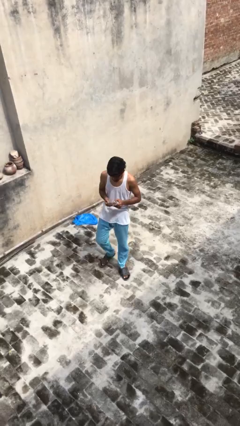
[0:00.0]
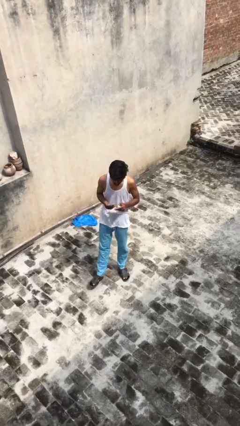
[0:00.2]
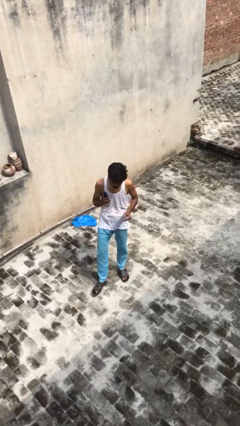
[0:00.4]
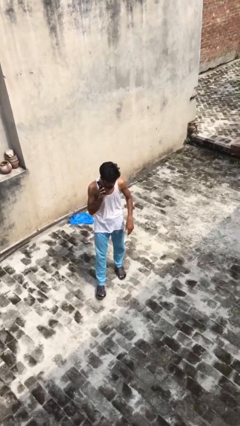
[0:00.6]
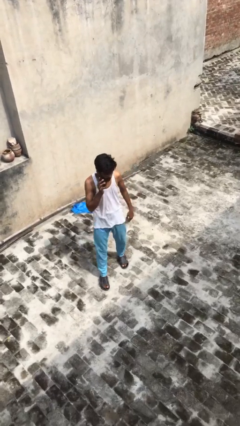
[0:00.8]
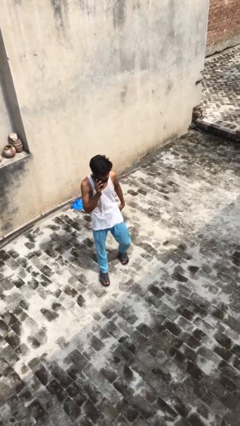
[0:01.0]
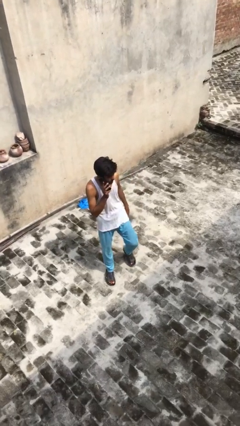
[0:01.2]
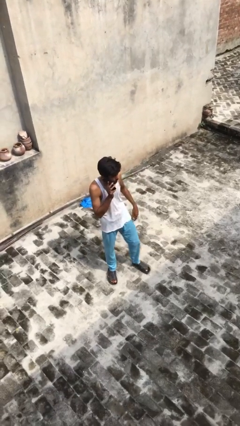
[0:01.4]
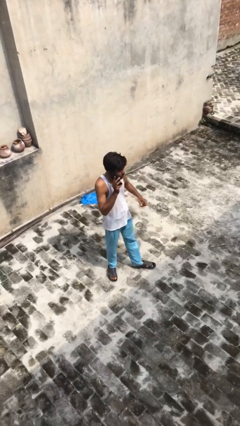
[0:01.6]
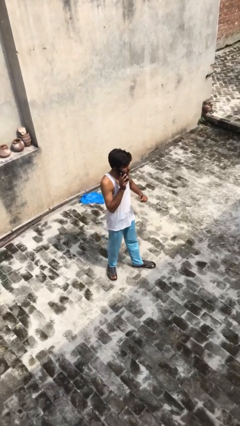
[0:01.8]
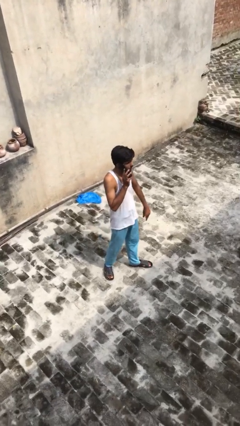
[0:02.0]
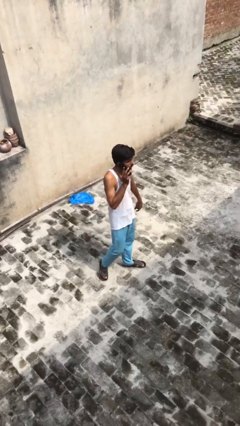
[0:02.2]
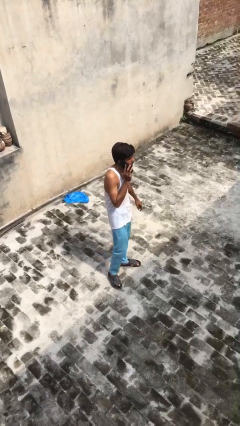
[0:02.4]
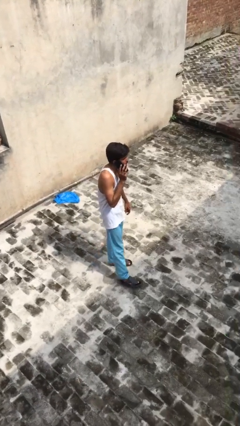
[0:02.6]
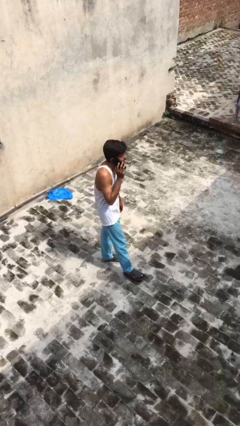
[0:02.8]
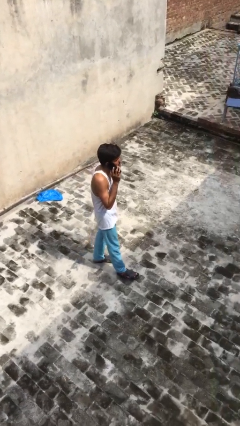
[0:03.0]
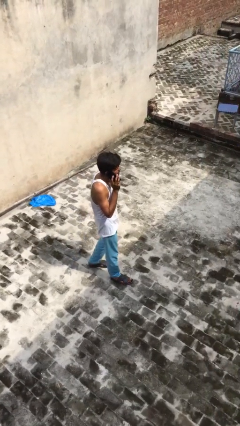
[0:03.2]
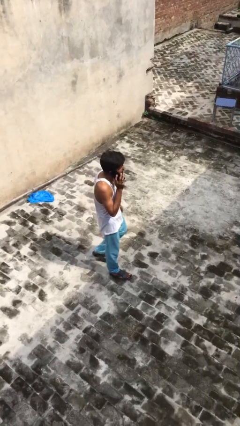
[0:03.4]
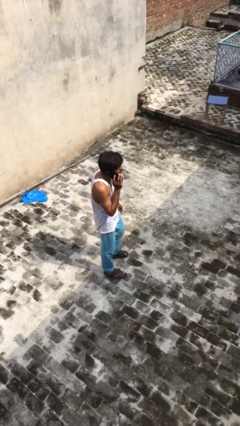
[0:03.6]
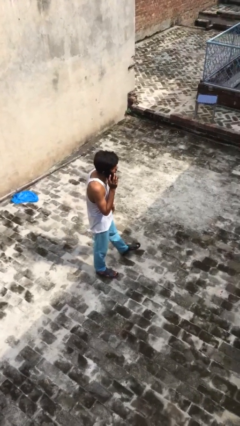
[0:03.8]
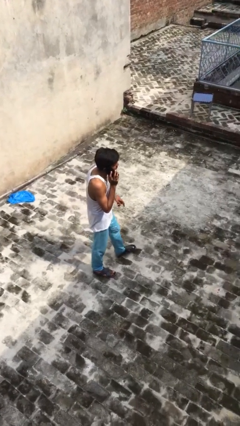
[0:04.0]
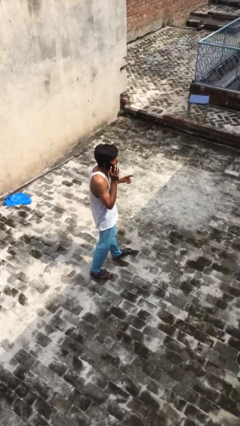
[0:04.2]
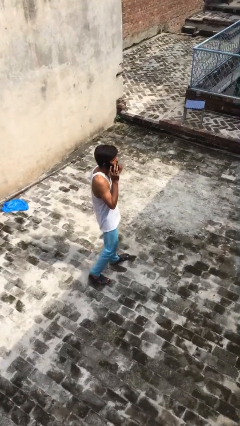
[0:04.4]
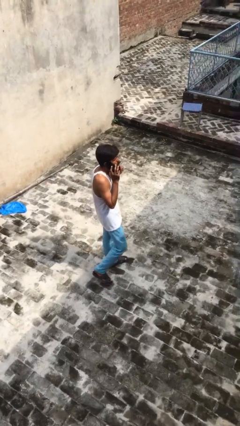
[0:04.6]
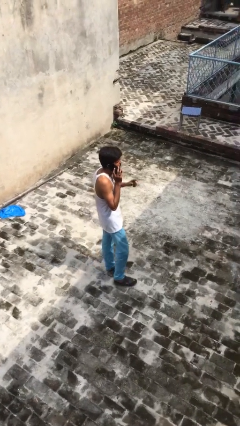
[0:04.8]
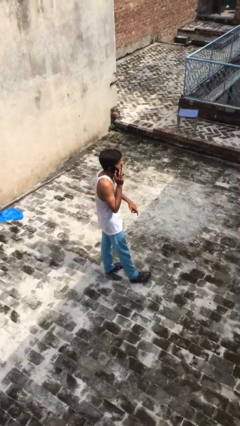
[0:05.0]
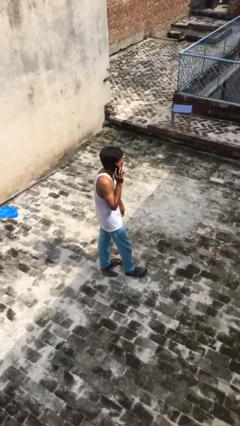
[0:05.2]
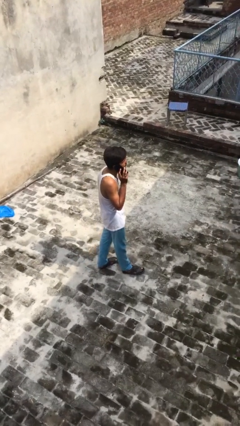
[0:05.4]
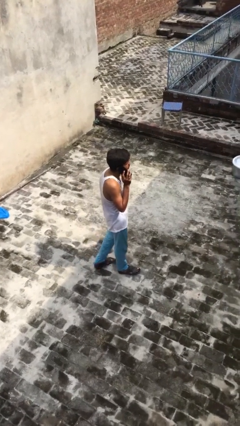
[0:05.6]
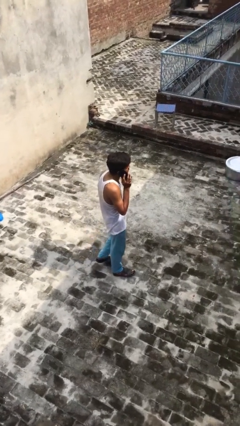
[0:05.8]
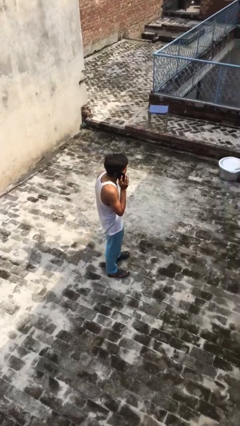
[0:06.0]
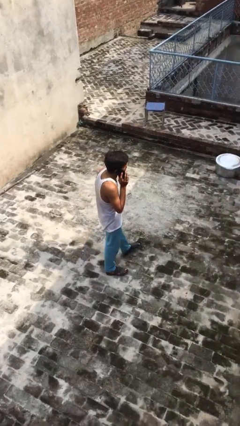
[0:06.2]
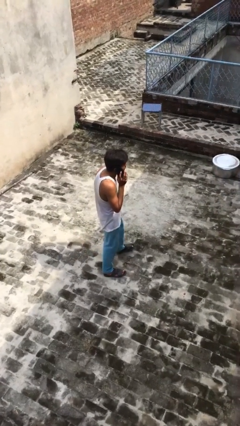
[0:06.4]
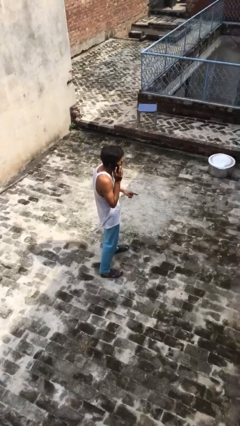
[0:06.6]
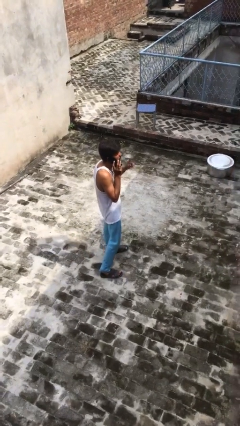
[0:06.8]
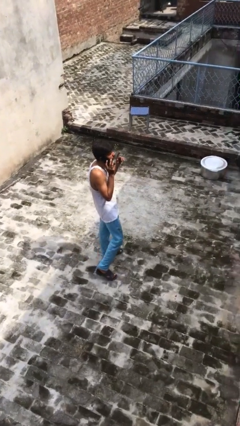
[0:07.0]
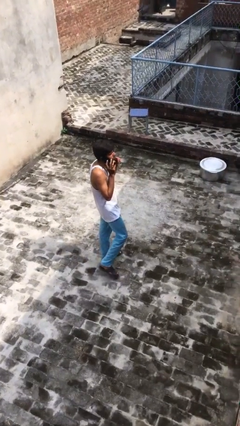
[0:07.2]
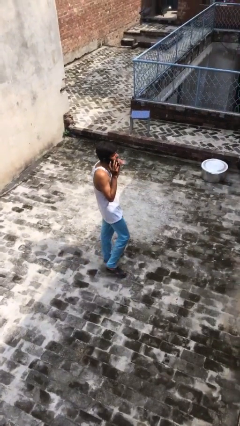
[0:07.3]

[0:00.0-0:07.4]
person talks on phone

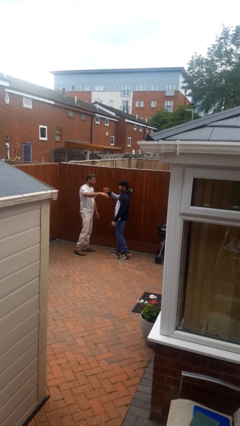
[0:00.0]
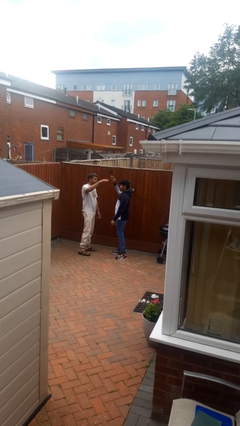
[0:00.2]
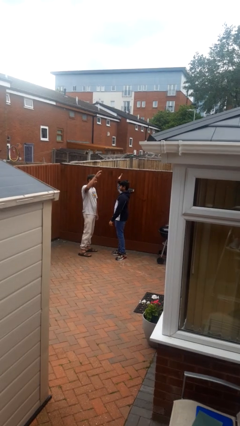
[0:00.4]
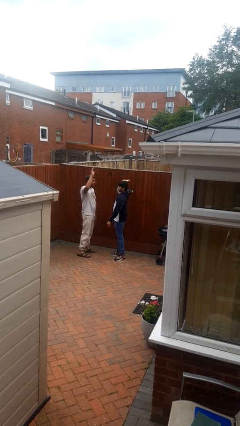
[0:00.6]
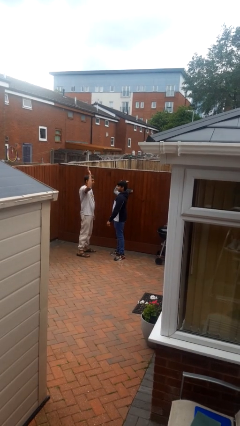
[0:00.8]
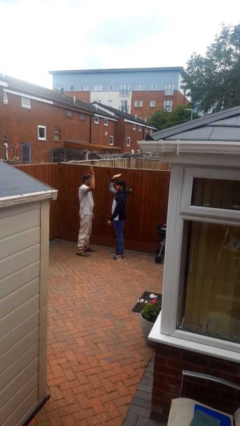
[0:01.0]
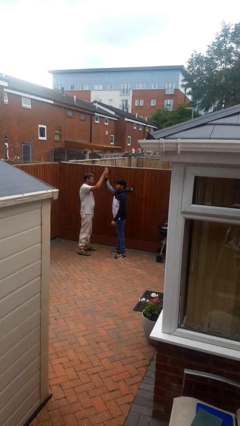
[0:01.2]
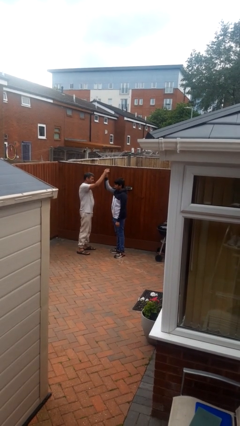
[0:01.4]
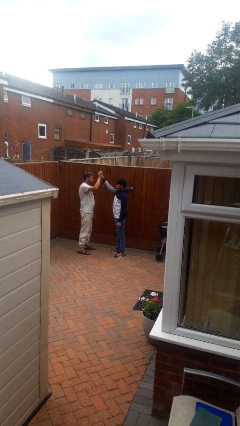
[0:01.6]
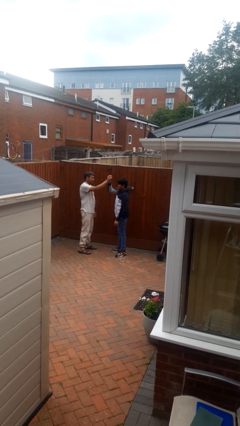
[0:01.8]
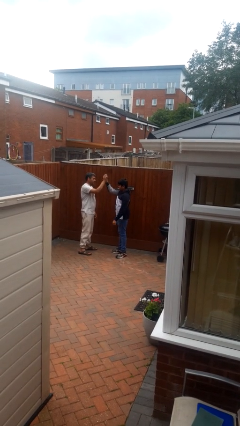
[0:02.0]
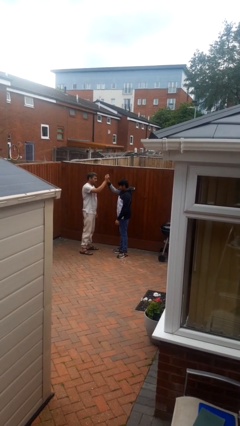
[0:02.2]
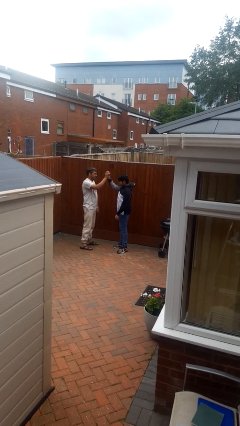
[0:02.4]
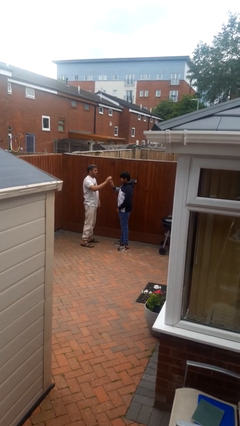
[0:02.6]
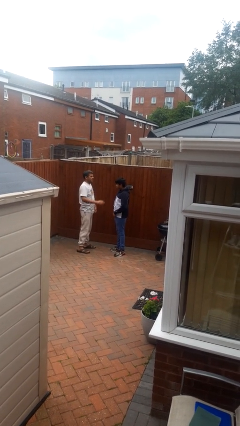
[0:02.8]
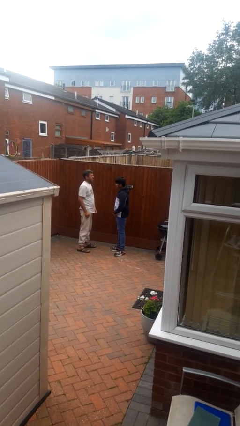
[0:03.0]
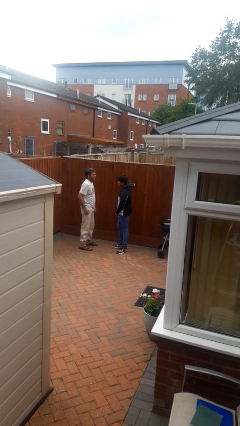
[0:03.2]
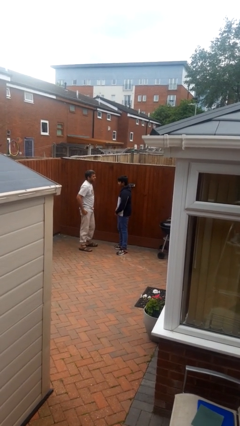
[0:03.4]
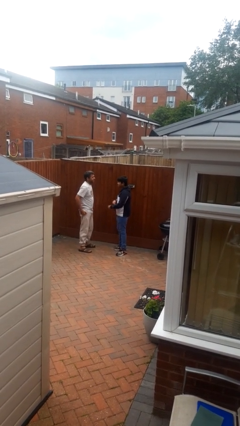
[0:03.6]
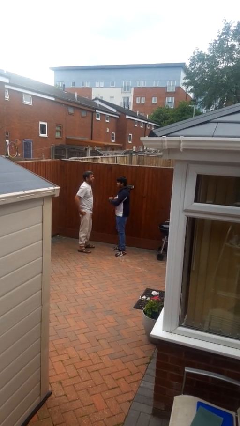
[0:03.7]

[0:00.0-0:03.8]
person highfives hand

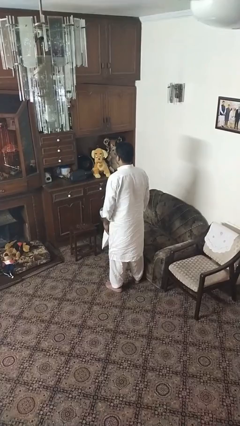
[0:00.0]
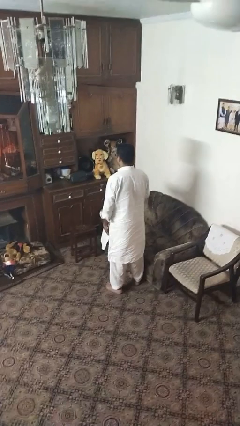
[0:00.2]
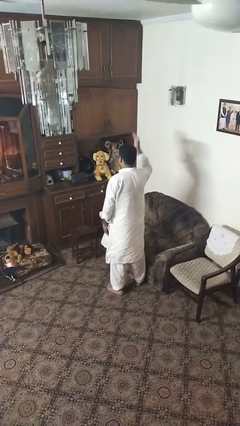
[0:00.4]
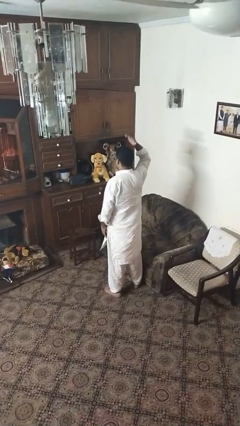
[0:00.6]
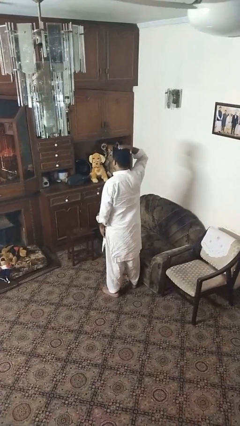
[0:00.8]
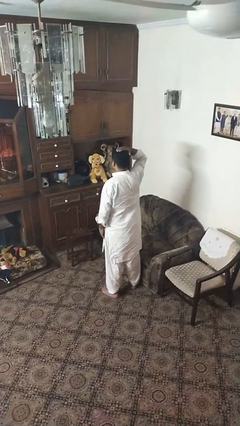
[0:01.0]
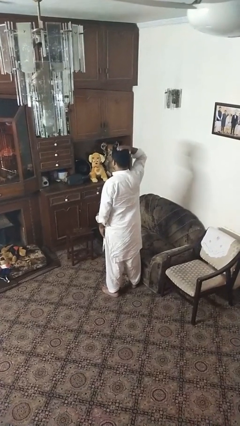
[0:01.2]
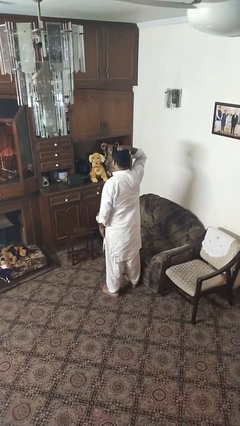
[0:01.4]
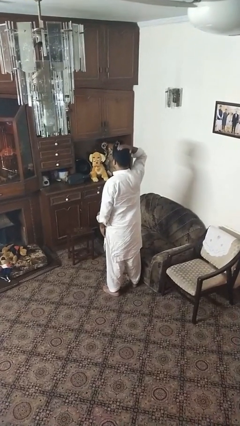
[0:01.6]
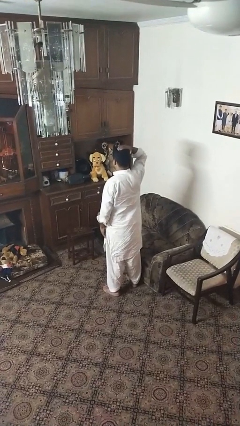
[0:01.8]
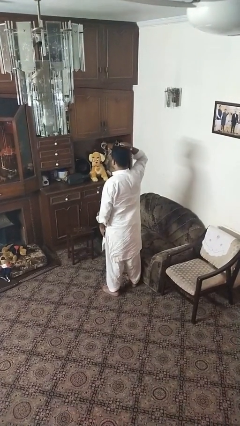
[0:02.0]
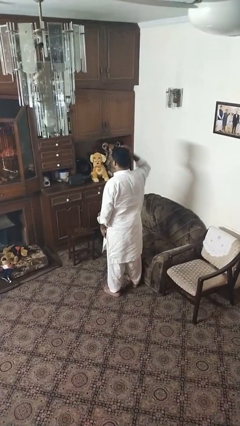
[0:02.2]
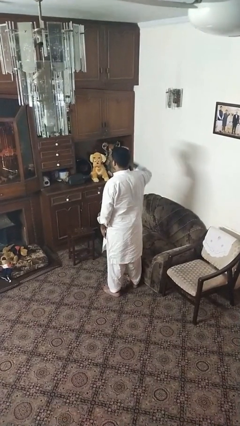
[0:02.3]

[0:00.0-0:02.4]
person pats head

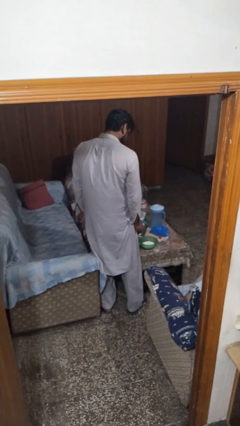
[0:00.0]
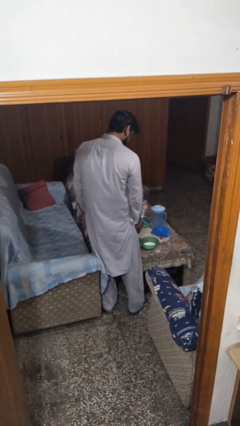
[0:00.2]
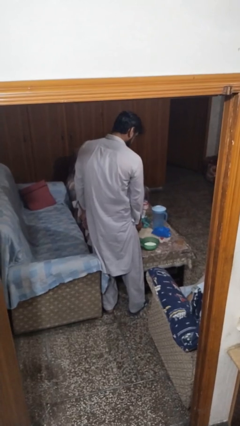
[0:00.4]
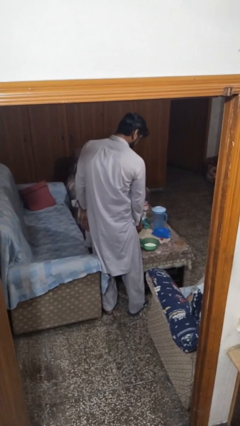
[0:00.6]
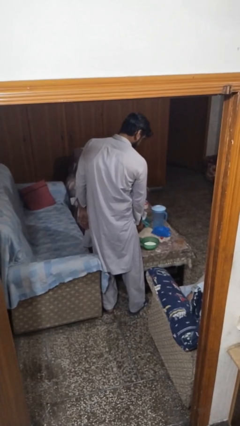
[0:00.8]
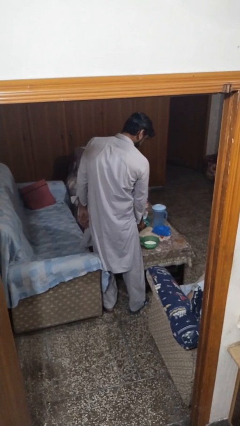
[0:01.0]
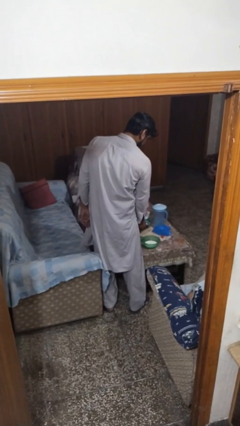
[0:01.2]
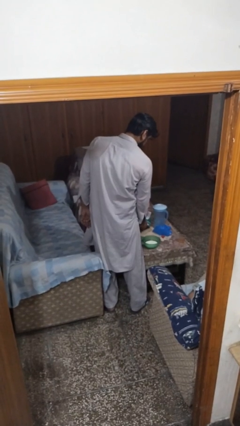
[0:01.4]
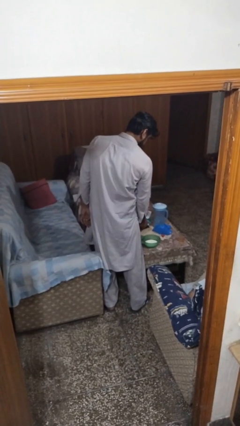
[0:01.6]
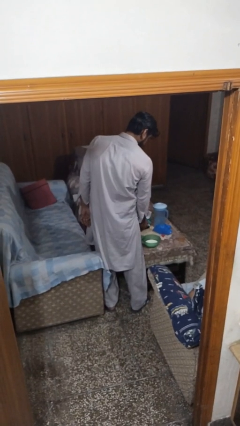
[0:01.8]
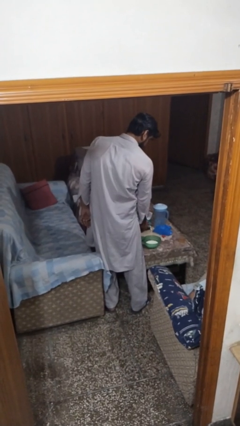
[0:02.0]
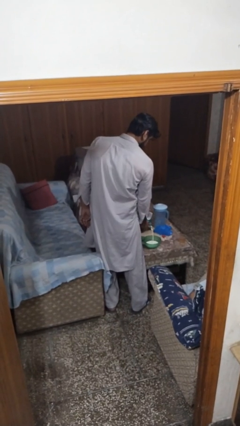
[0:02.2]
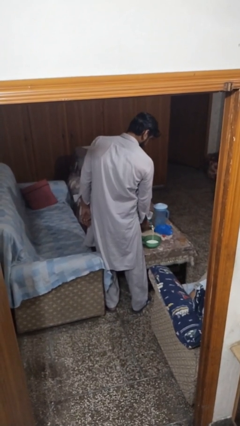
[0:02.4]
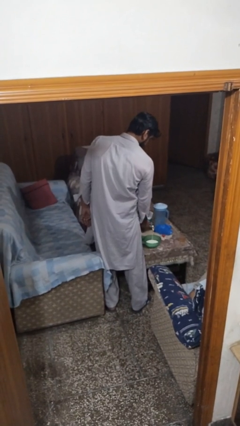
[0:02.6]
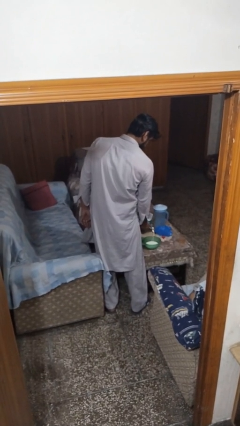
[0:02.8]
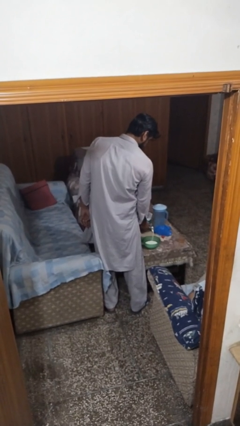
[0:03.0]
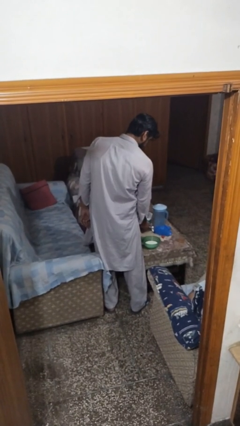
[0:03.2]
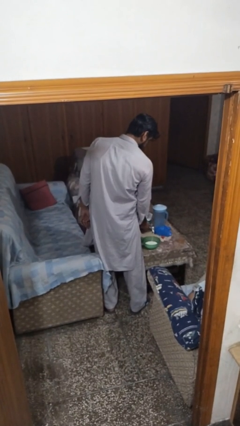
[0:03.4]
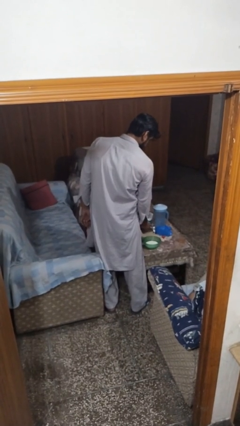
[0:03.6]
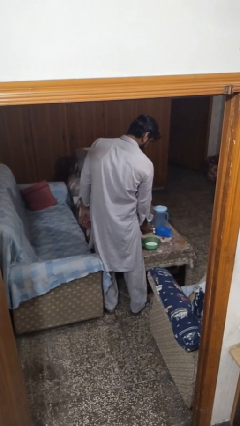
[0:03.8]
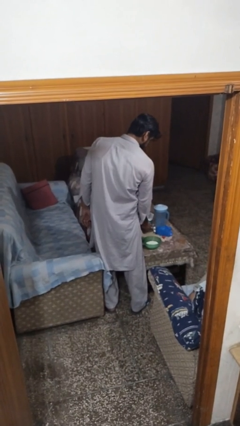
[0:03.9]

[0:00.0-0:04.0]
person pours into bowl
